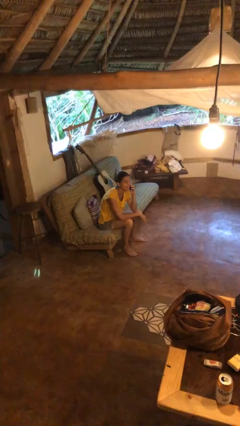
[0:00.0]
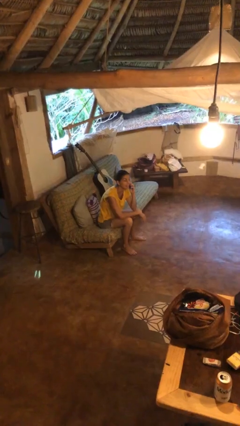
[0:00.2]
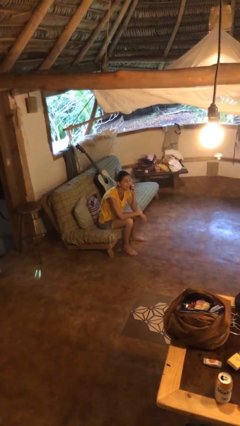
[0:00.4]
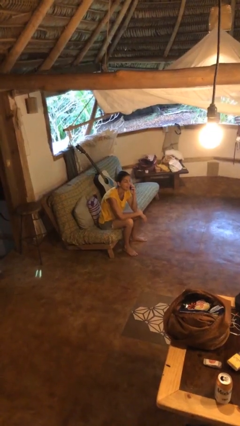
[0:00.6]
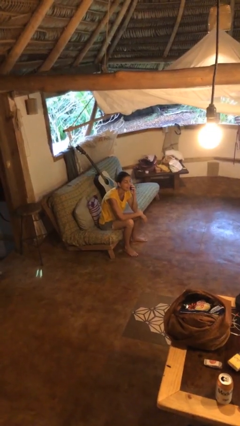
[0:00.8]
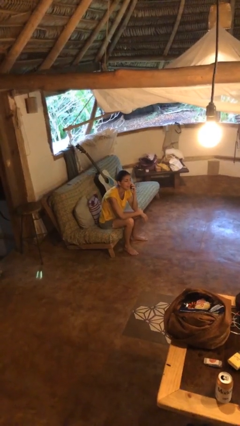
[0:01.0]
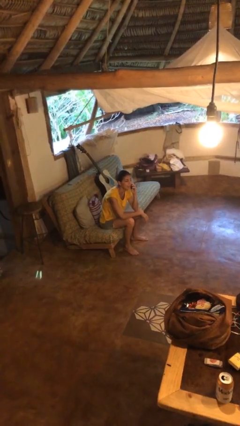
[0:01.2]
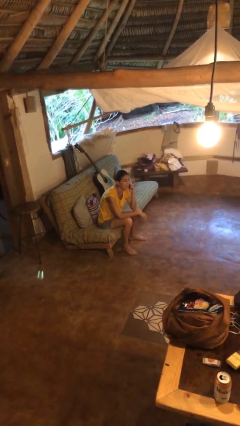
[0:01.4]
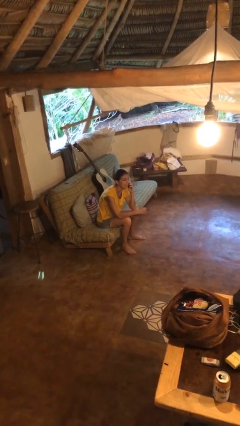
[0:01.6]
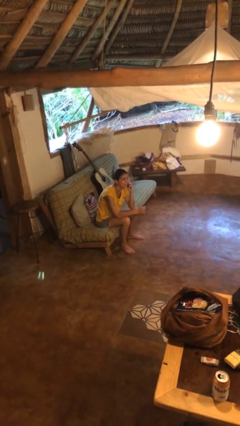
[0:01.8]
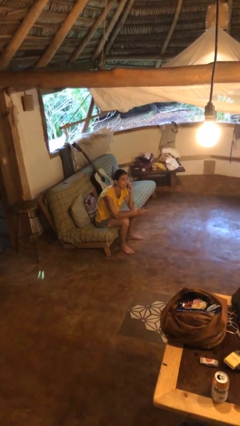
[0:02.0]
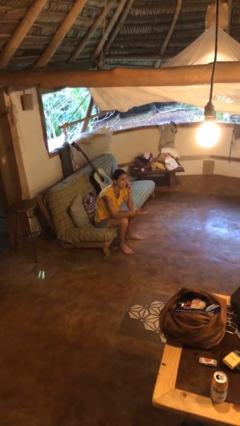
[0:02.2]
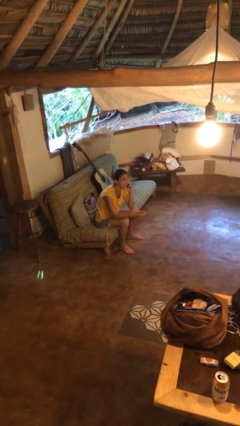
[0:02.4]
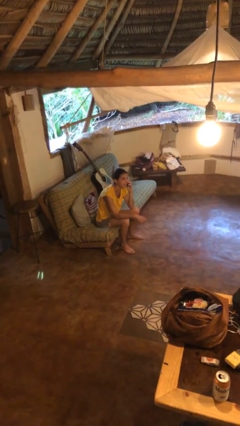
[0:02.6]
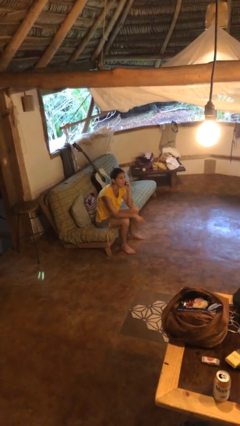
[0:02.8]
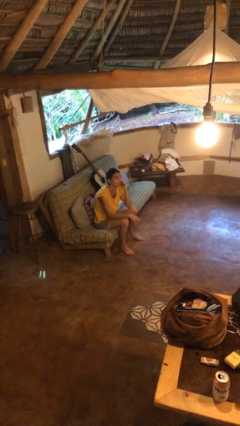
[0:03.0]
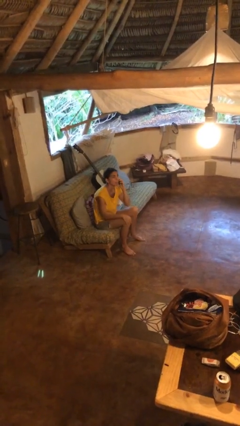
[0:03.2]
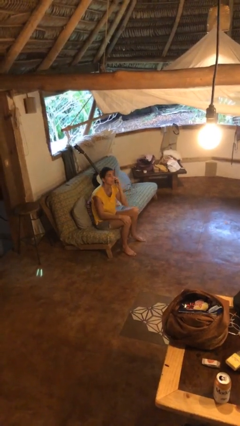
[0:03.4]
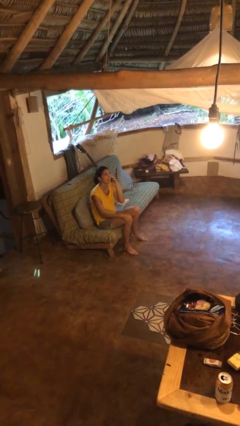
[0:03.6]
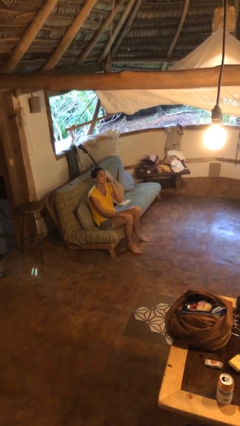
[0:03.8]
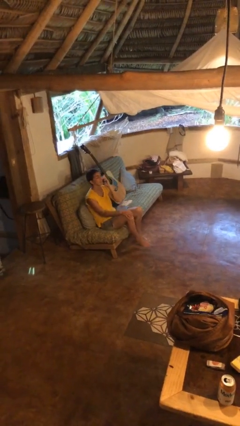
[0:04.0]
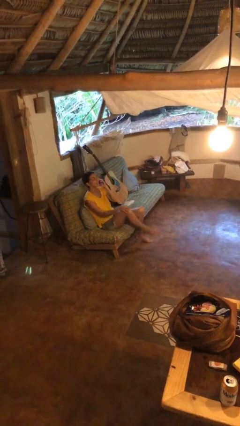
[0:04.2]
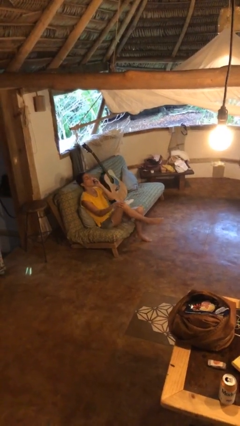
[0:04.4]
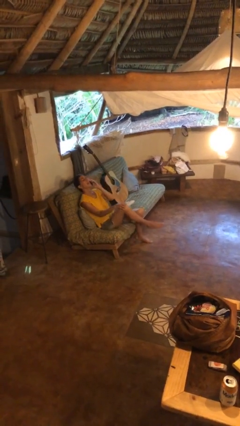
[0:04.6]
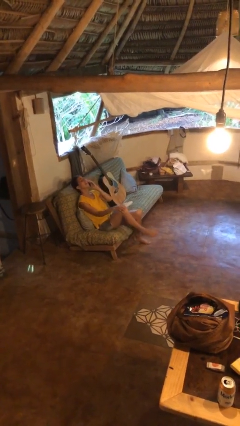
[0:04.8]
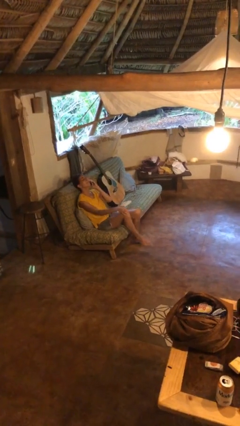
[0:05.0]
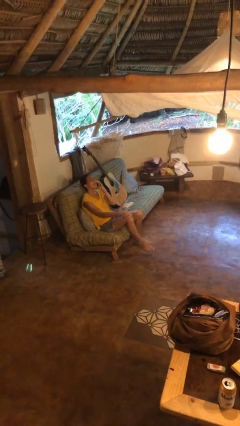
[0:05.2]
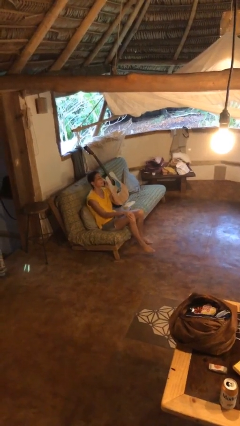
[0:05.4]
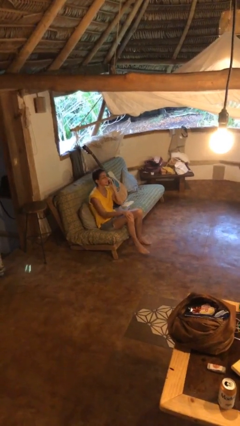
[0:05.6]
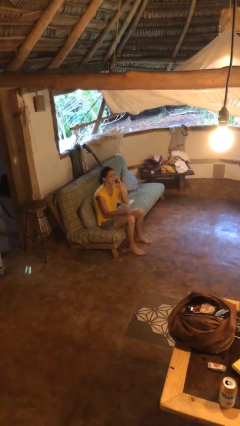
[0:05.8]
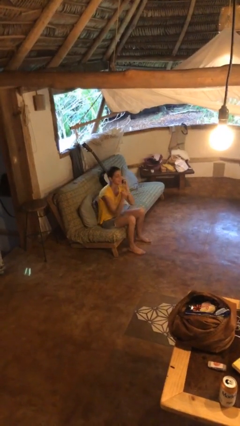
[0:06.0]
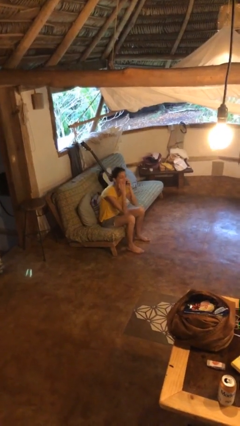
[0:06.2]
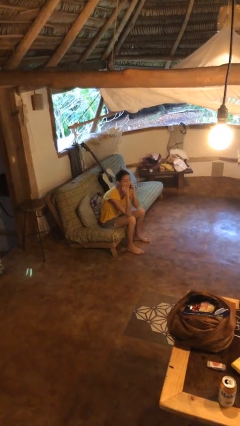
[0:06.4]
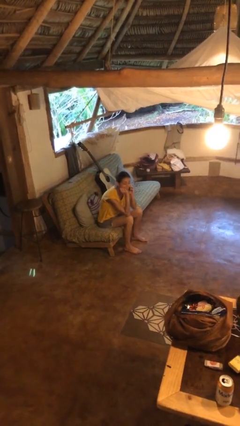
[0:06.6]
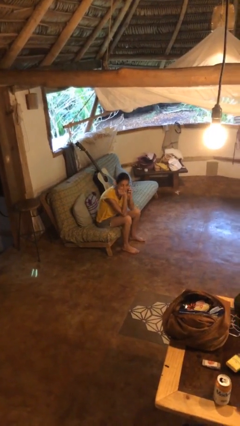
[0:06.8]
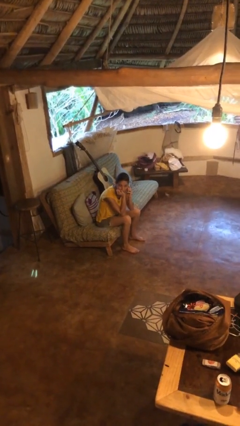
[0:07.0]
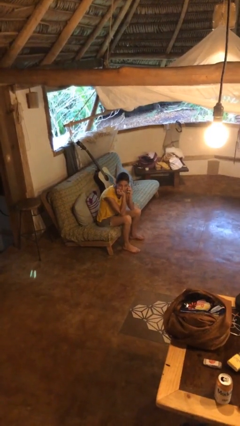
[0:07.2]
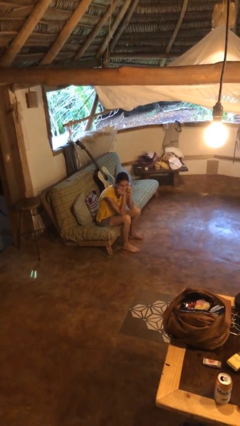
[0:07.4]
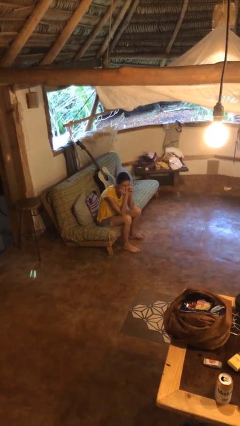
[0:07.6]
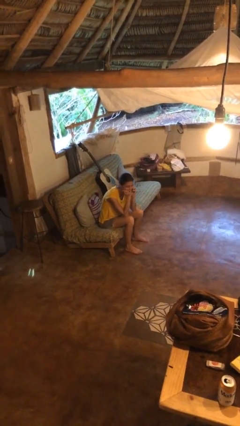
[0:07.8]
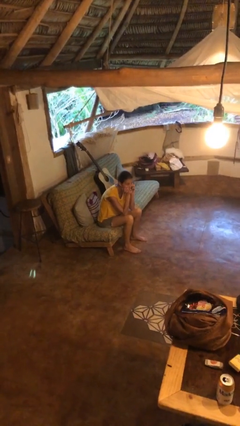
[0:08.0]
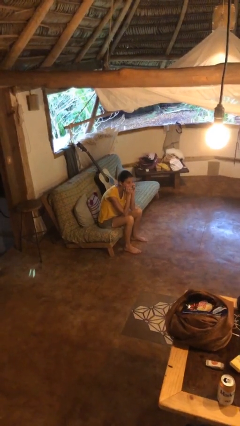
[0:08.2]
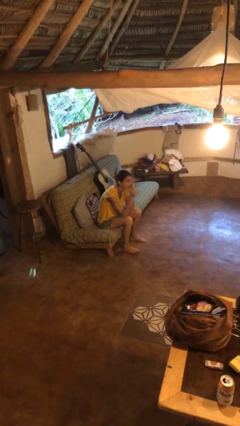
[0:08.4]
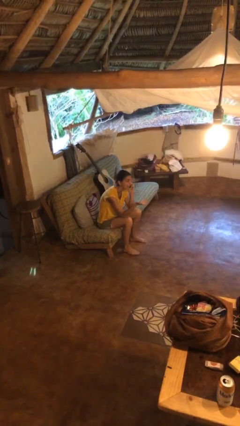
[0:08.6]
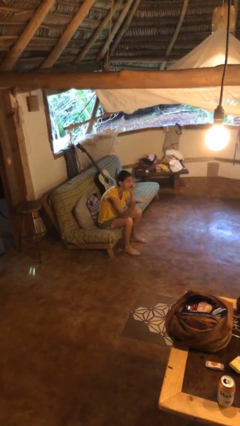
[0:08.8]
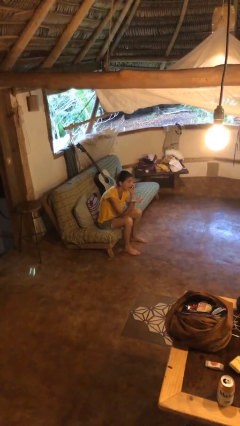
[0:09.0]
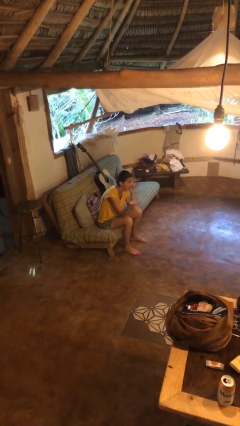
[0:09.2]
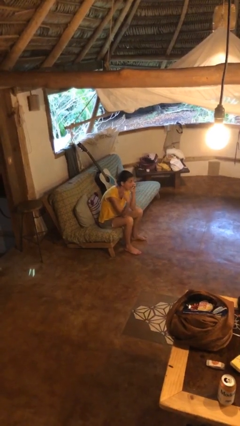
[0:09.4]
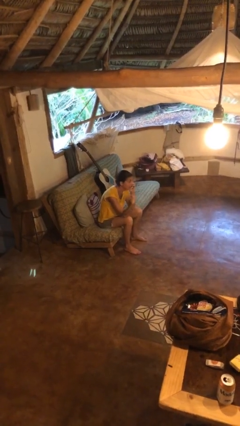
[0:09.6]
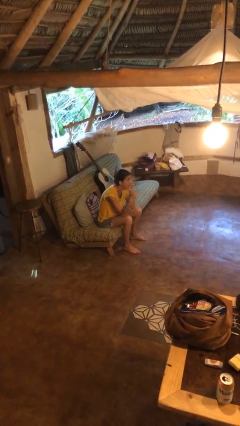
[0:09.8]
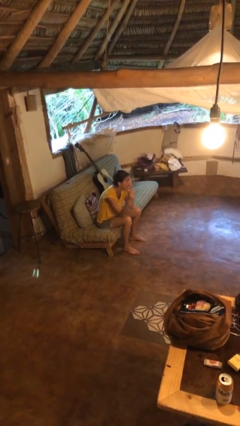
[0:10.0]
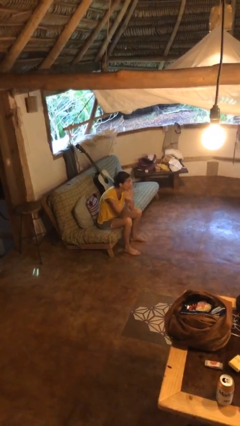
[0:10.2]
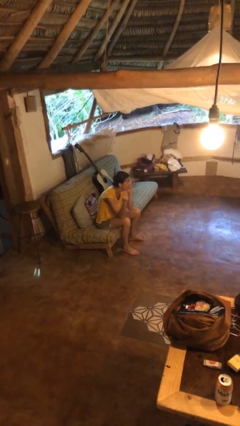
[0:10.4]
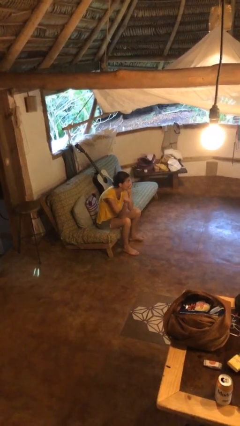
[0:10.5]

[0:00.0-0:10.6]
person talks on phone

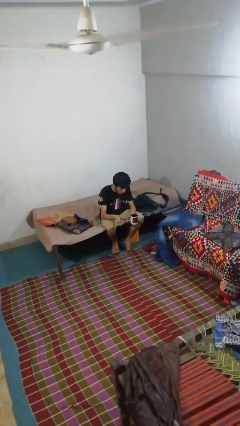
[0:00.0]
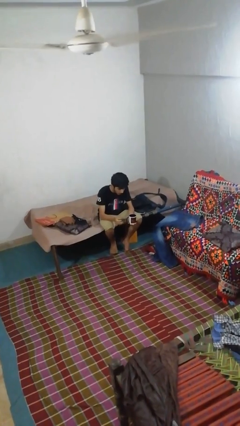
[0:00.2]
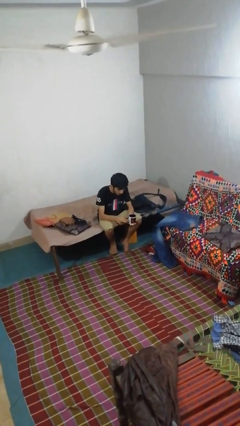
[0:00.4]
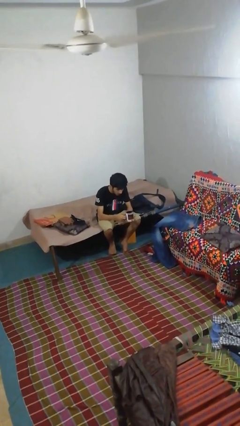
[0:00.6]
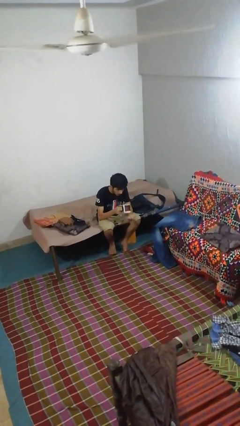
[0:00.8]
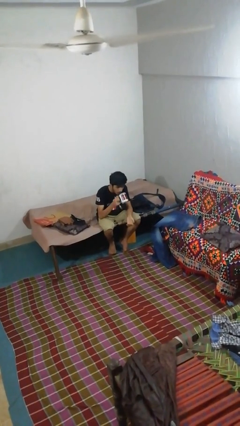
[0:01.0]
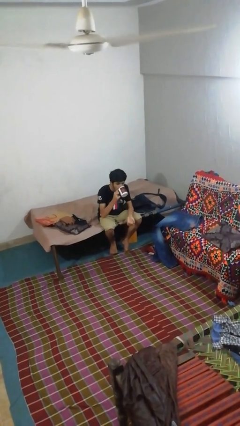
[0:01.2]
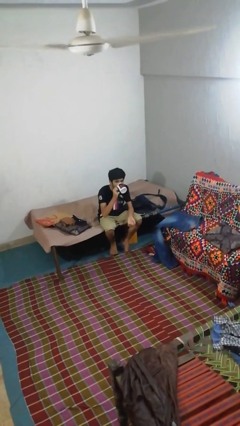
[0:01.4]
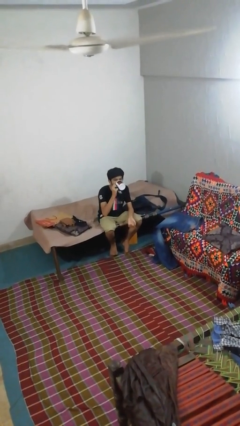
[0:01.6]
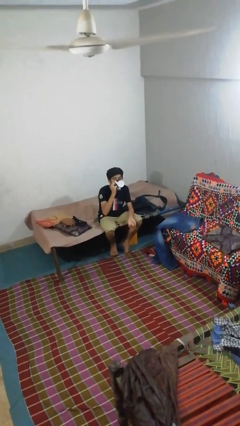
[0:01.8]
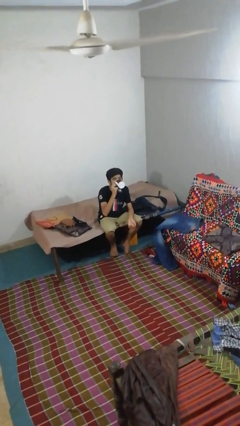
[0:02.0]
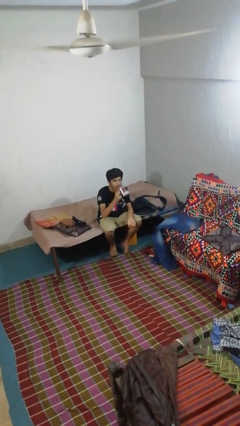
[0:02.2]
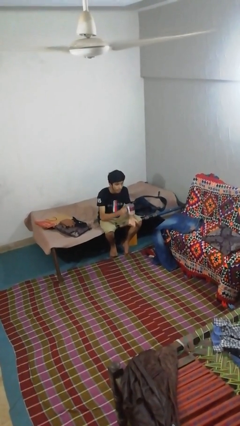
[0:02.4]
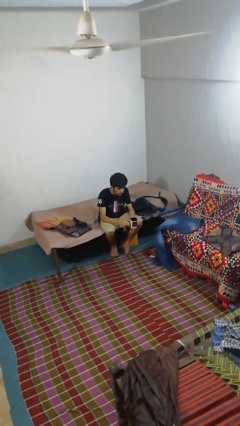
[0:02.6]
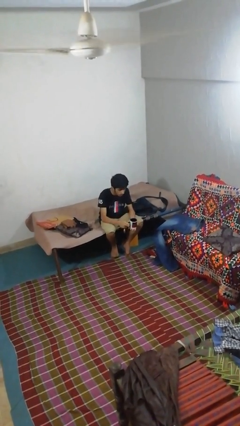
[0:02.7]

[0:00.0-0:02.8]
person drinks from mug

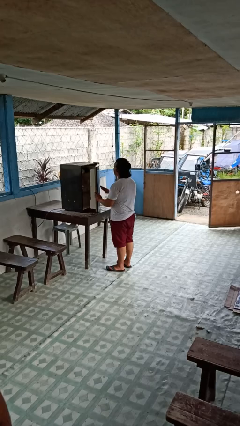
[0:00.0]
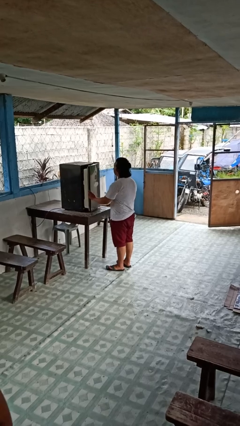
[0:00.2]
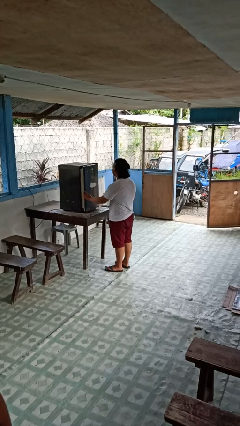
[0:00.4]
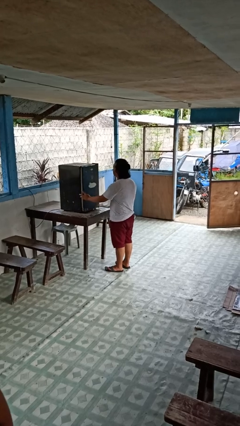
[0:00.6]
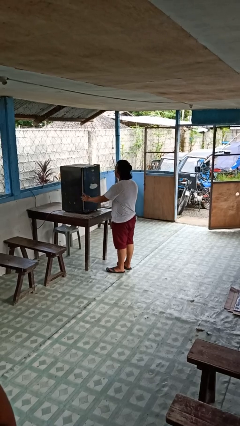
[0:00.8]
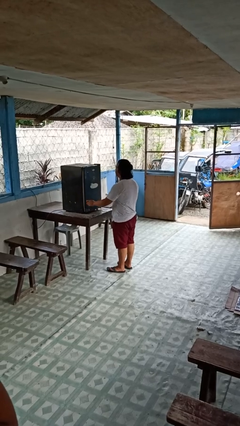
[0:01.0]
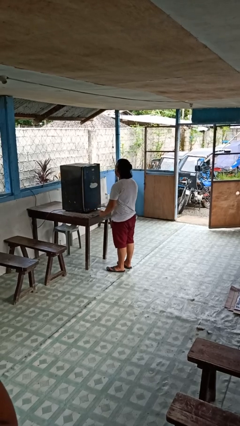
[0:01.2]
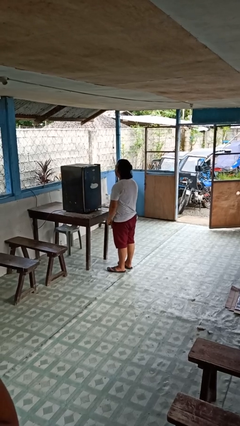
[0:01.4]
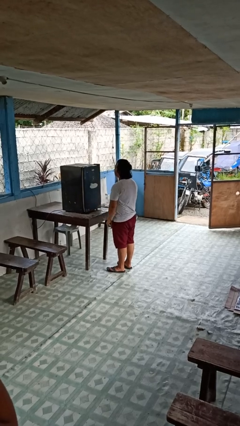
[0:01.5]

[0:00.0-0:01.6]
person closes refrigerator

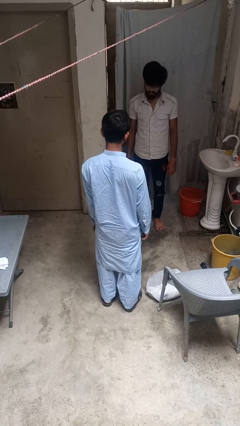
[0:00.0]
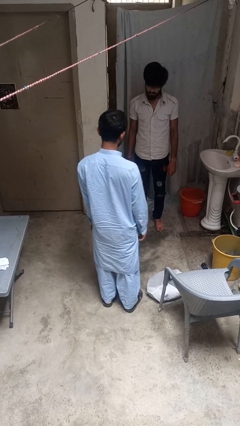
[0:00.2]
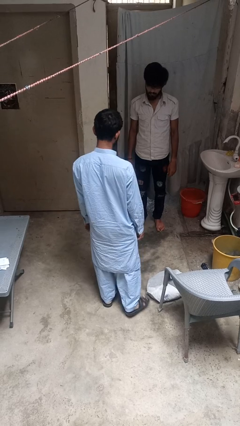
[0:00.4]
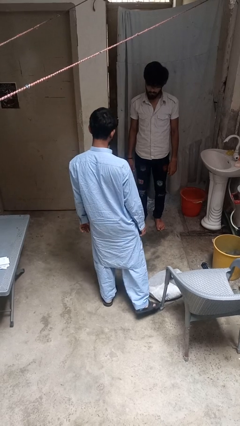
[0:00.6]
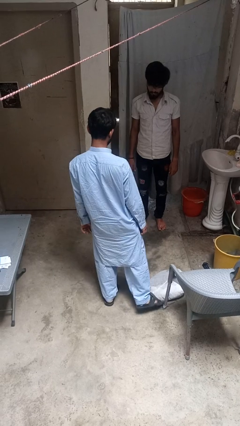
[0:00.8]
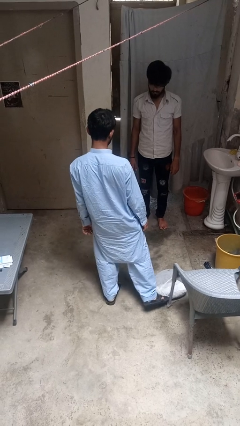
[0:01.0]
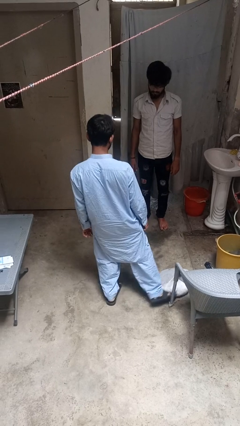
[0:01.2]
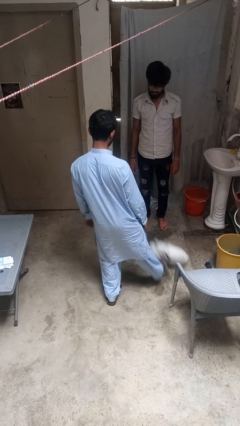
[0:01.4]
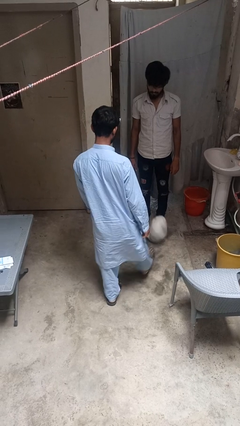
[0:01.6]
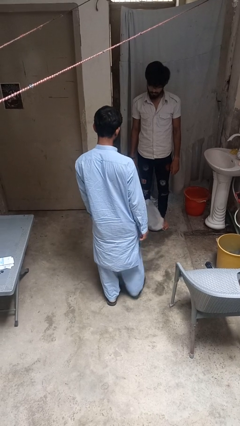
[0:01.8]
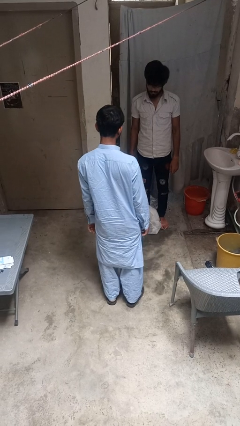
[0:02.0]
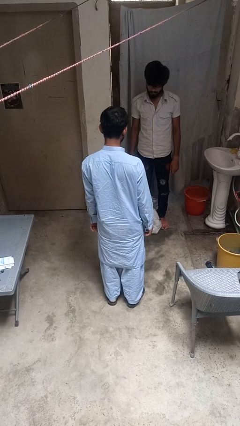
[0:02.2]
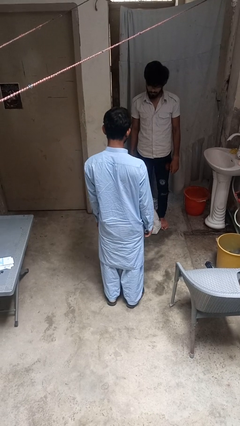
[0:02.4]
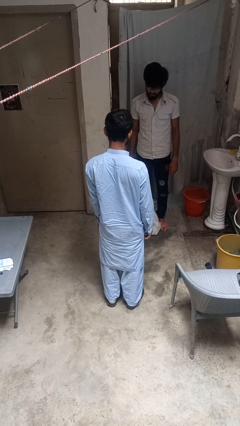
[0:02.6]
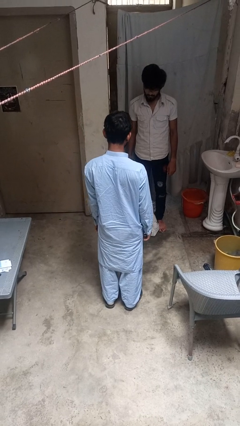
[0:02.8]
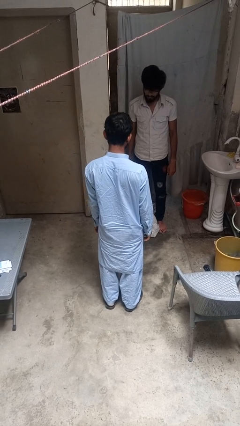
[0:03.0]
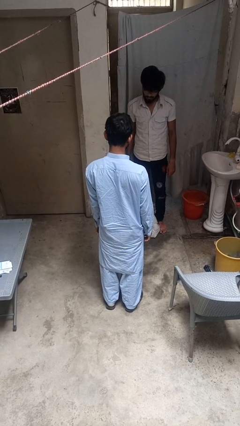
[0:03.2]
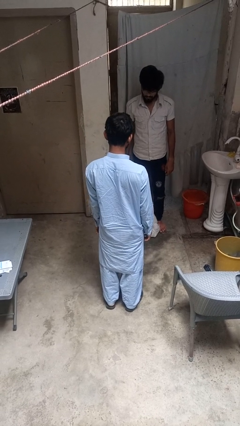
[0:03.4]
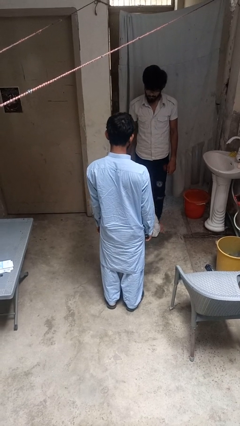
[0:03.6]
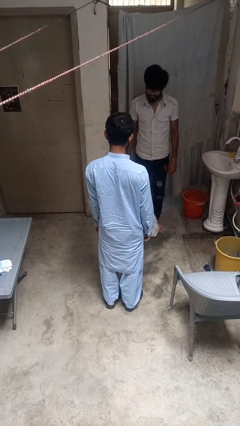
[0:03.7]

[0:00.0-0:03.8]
person kicks object to person
